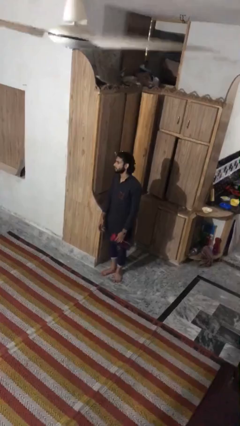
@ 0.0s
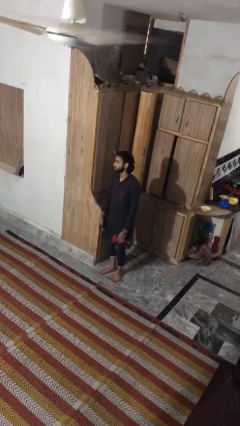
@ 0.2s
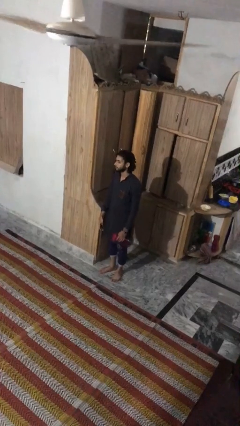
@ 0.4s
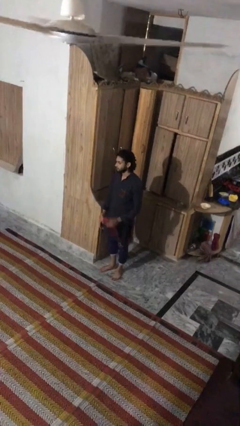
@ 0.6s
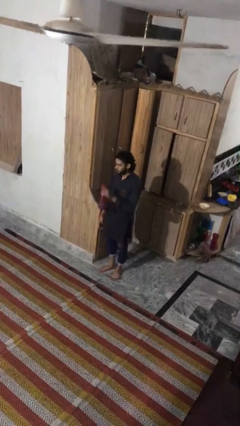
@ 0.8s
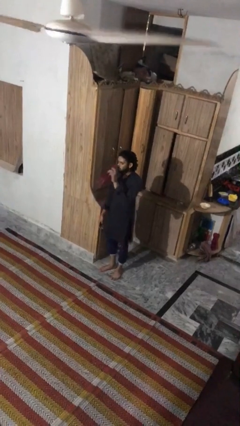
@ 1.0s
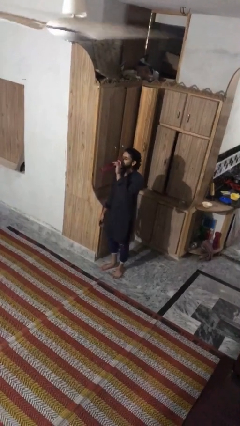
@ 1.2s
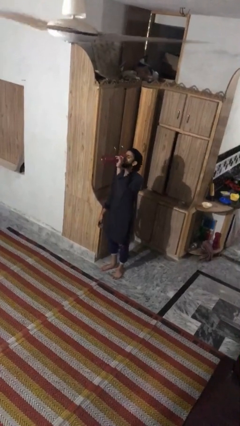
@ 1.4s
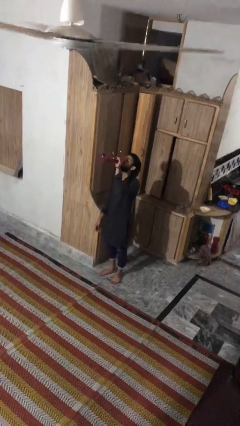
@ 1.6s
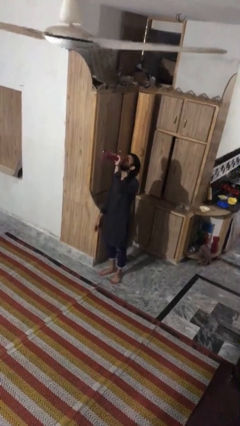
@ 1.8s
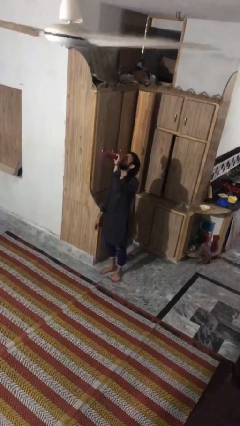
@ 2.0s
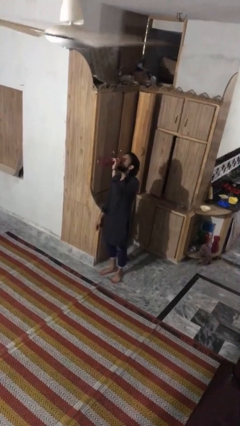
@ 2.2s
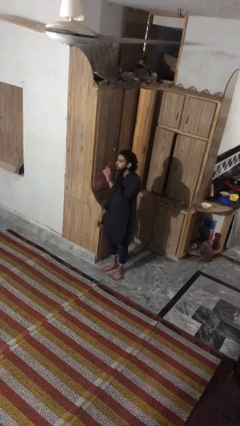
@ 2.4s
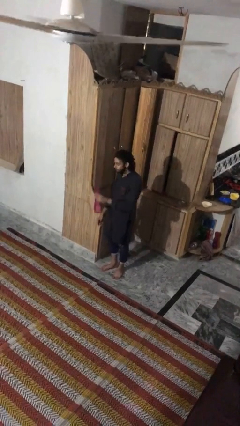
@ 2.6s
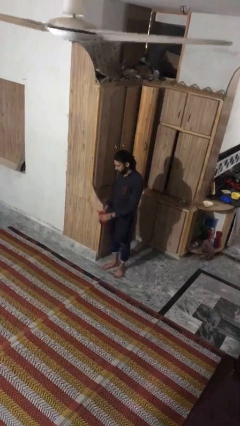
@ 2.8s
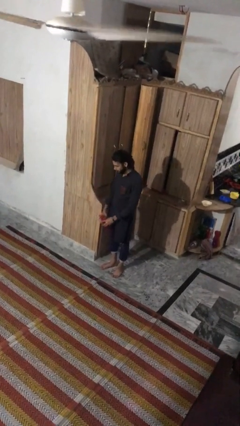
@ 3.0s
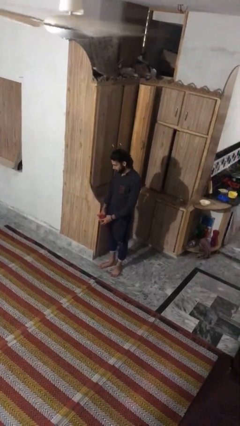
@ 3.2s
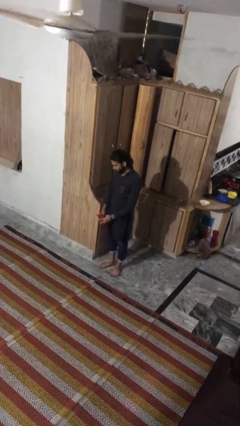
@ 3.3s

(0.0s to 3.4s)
person drinks from bottle

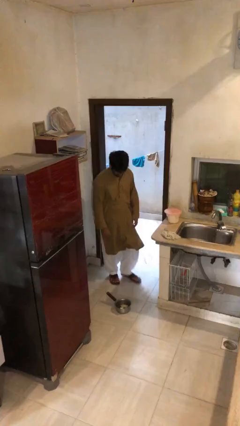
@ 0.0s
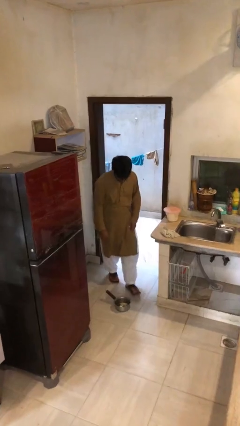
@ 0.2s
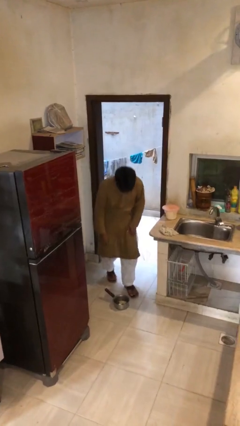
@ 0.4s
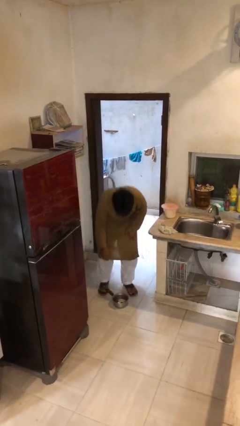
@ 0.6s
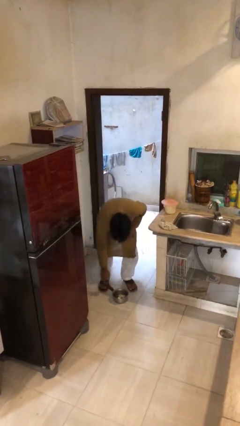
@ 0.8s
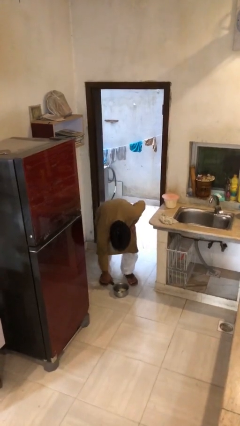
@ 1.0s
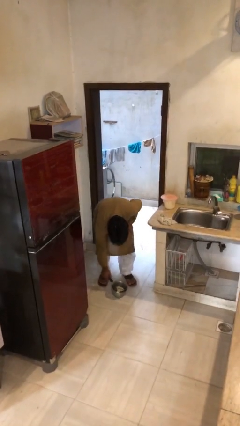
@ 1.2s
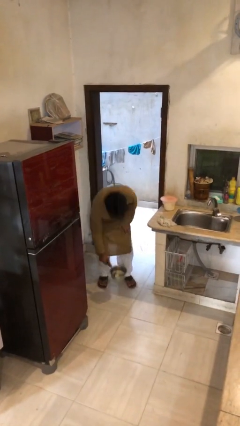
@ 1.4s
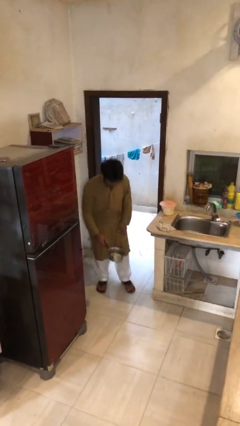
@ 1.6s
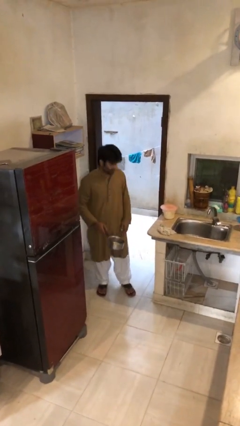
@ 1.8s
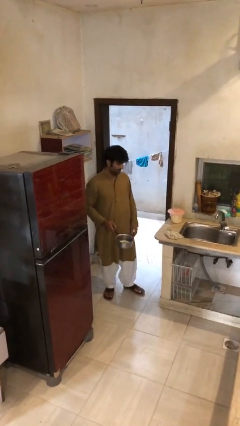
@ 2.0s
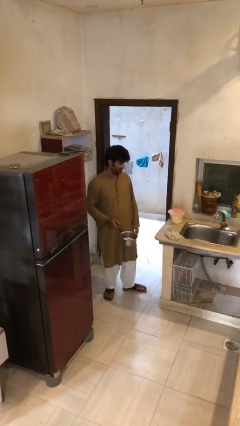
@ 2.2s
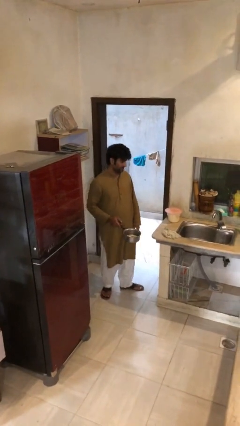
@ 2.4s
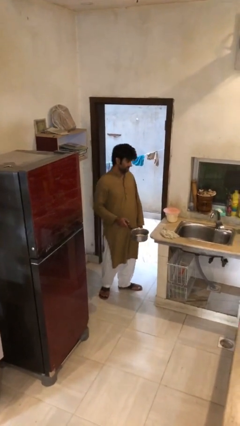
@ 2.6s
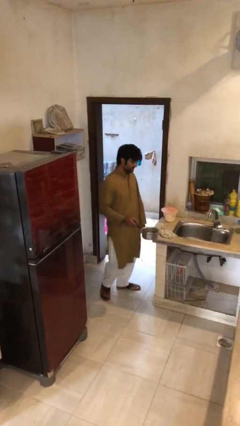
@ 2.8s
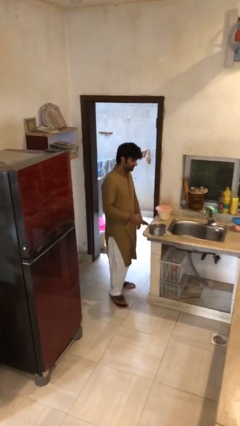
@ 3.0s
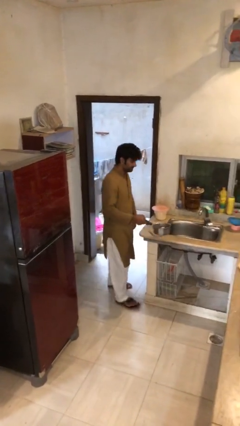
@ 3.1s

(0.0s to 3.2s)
person picks up object from floor

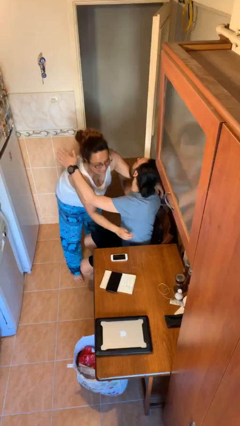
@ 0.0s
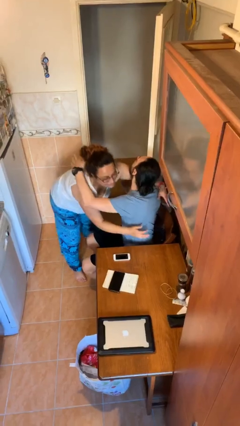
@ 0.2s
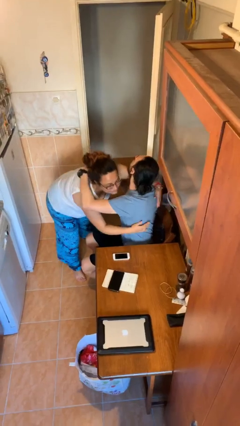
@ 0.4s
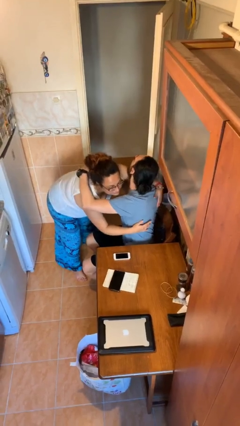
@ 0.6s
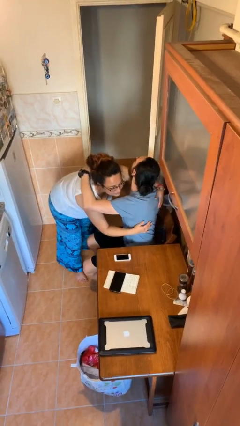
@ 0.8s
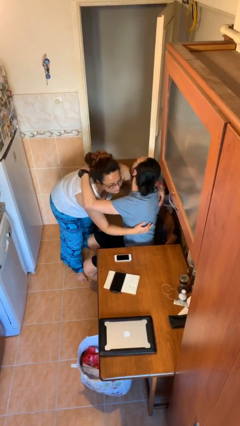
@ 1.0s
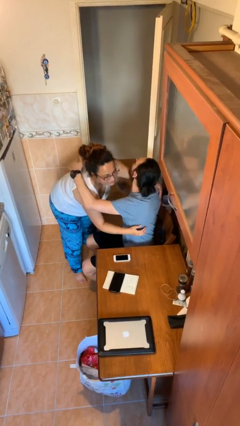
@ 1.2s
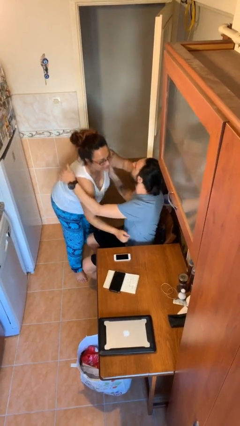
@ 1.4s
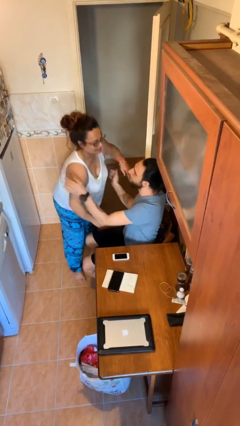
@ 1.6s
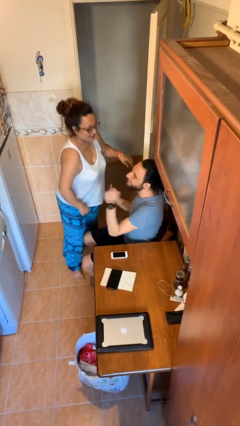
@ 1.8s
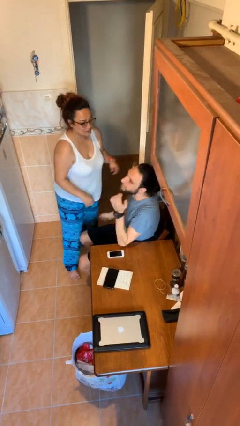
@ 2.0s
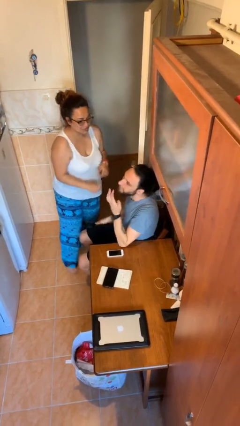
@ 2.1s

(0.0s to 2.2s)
person embraces person

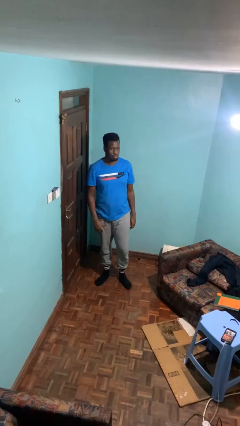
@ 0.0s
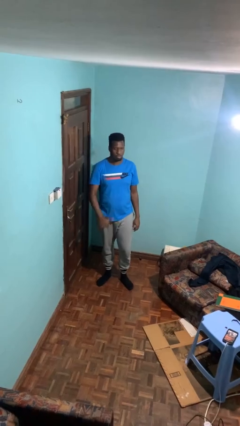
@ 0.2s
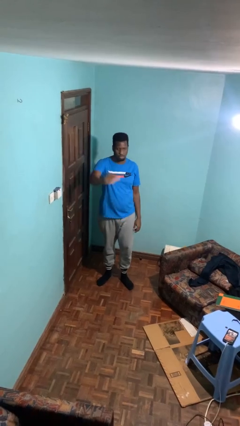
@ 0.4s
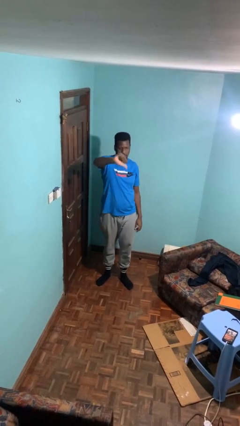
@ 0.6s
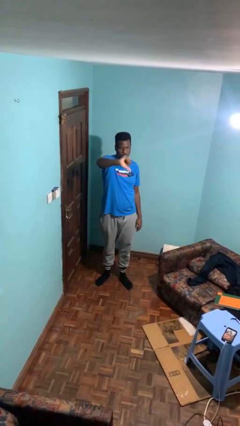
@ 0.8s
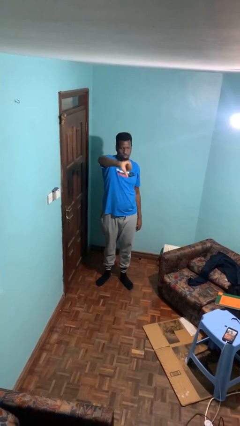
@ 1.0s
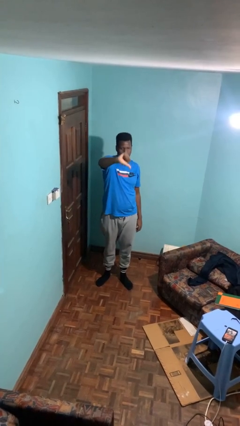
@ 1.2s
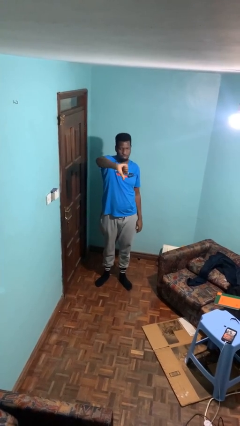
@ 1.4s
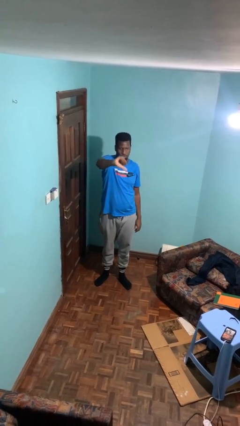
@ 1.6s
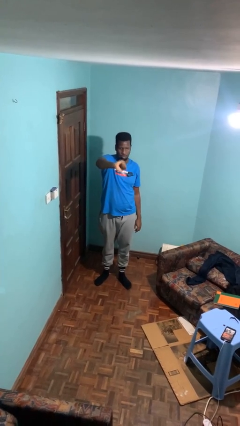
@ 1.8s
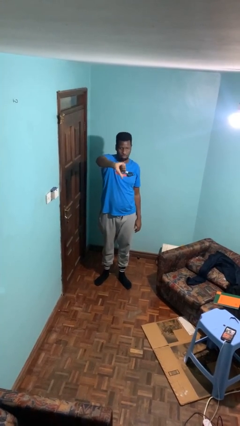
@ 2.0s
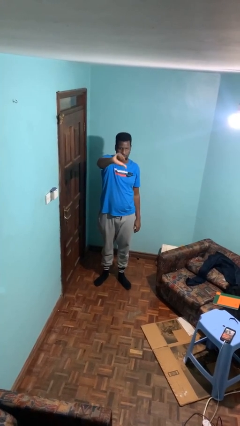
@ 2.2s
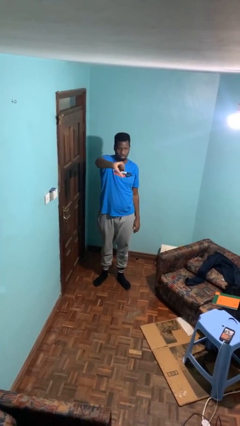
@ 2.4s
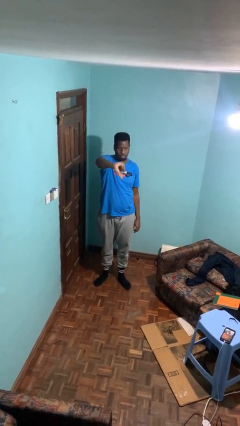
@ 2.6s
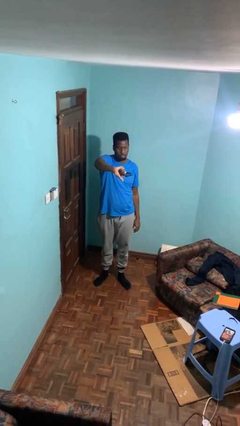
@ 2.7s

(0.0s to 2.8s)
person gestures thumbs down

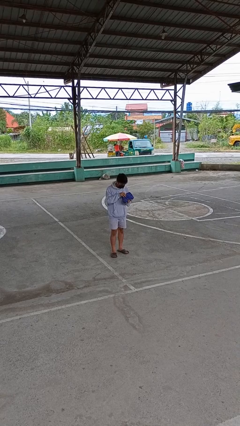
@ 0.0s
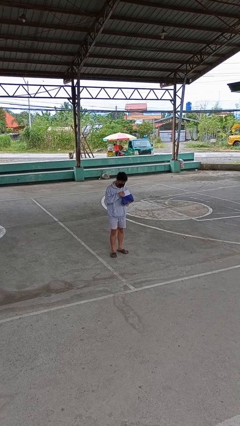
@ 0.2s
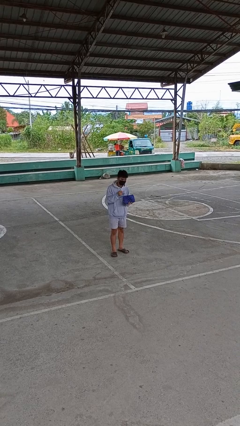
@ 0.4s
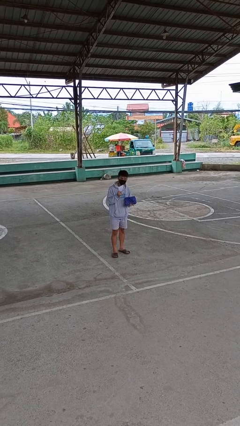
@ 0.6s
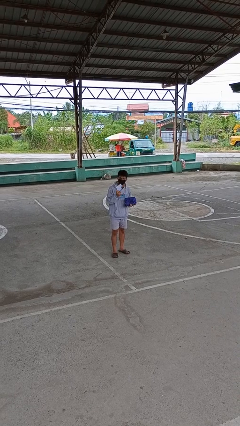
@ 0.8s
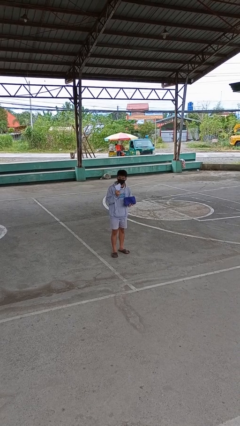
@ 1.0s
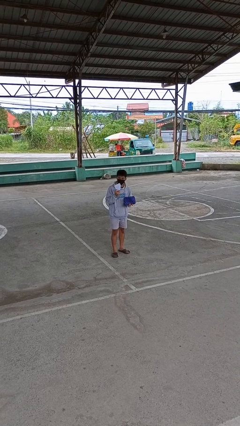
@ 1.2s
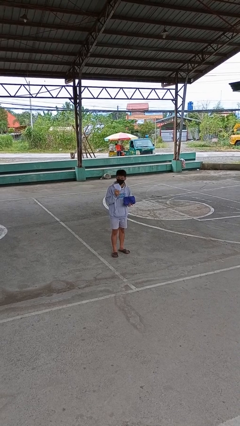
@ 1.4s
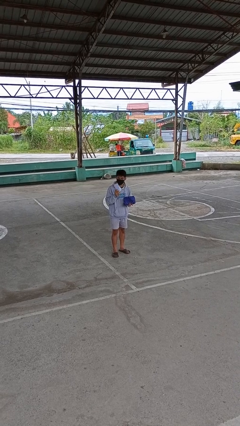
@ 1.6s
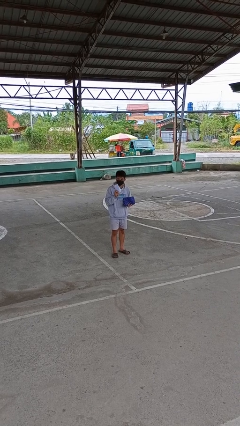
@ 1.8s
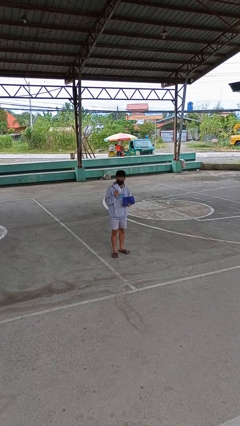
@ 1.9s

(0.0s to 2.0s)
person takes object from purse

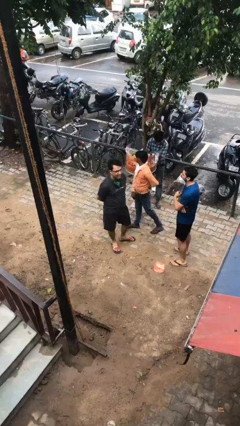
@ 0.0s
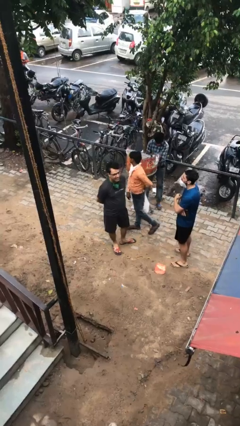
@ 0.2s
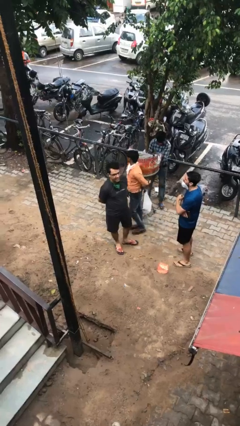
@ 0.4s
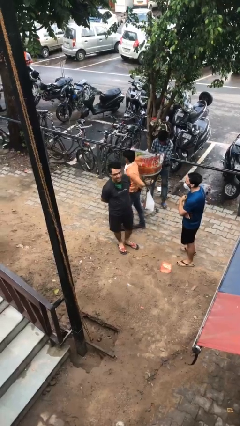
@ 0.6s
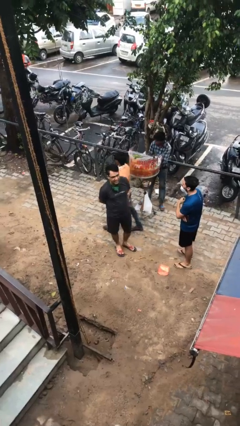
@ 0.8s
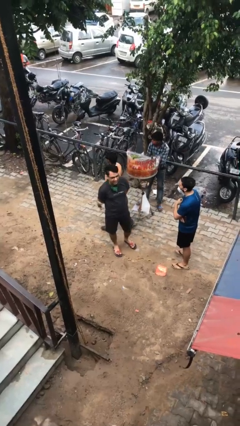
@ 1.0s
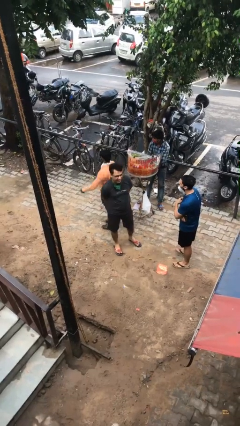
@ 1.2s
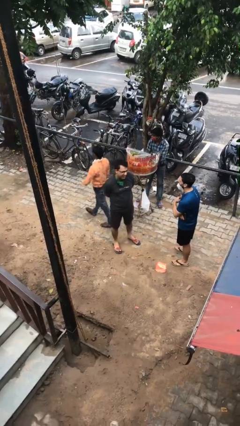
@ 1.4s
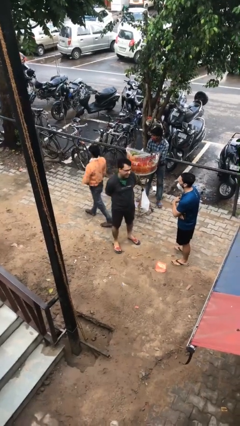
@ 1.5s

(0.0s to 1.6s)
person laughs with person

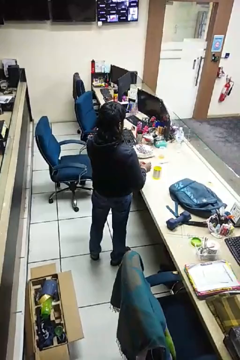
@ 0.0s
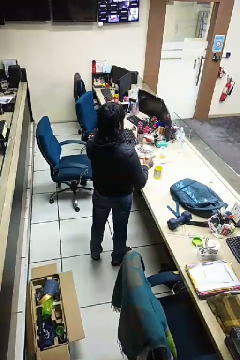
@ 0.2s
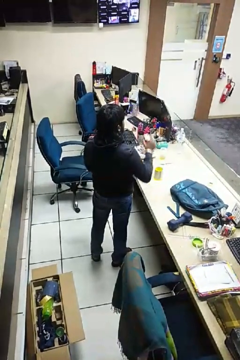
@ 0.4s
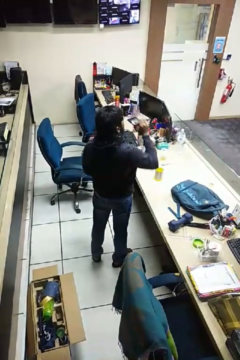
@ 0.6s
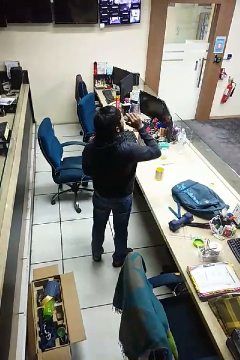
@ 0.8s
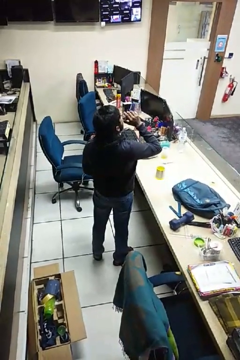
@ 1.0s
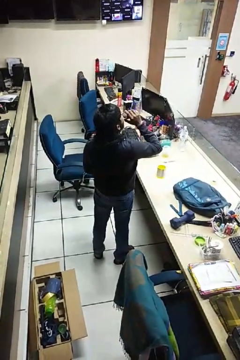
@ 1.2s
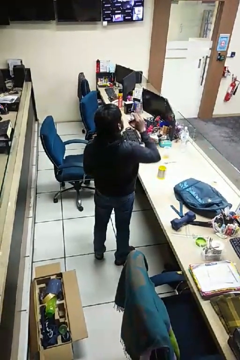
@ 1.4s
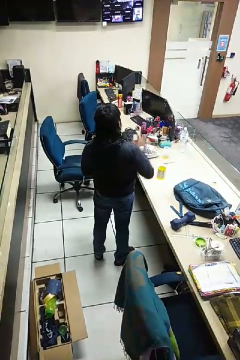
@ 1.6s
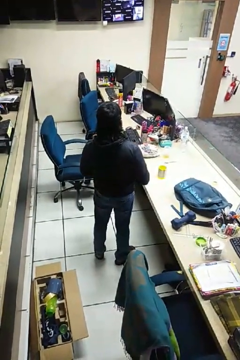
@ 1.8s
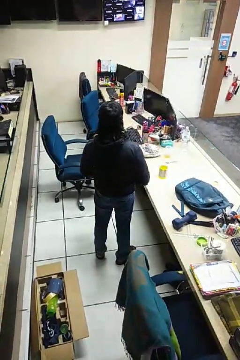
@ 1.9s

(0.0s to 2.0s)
person drinks from beverage can
